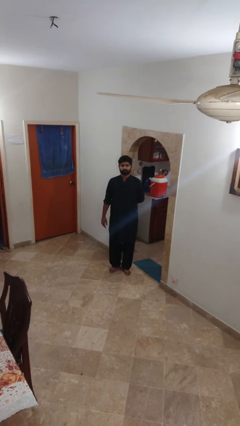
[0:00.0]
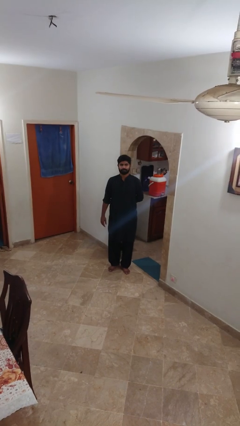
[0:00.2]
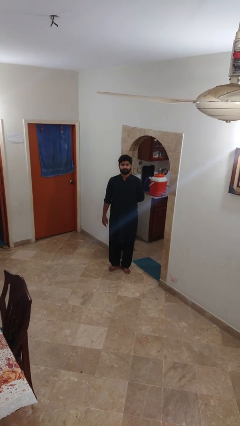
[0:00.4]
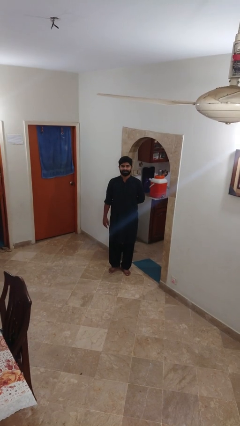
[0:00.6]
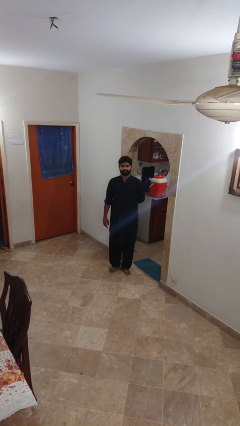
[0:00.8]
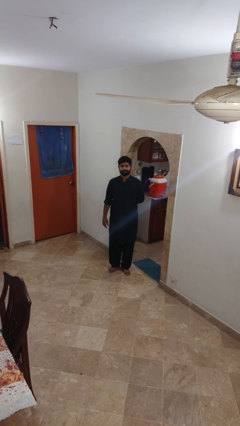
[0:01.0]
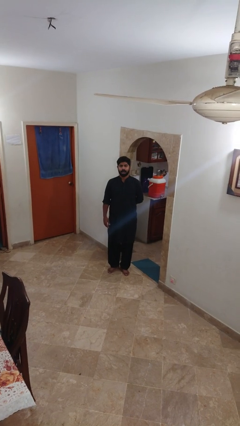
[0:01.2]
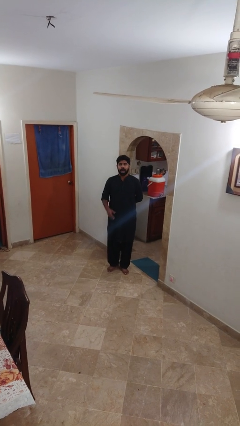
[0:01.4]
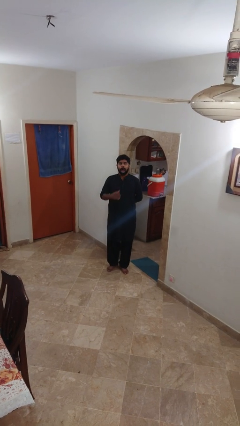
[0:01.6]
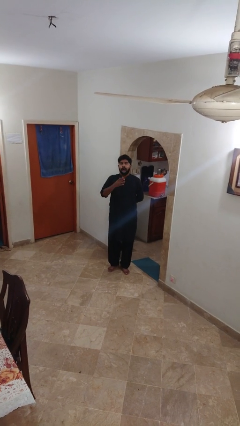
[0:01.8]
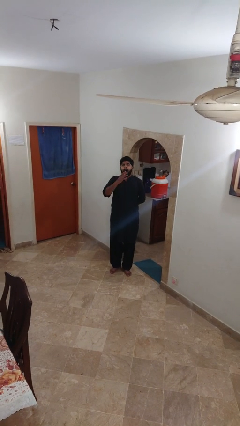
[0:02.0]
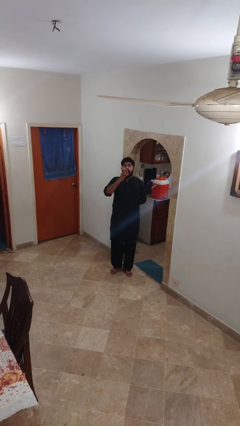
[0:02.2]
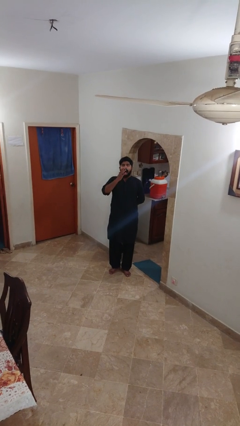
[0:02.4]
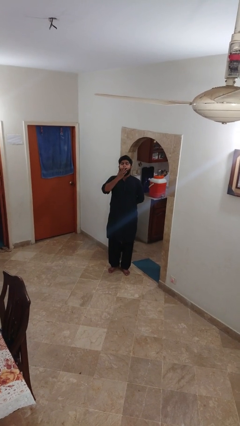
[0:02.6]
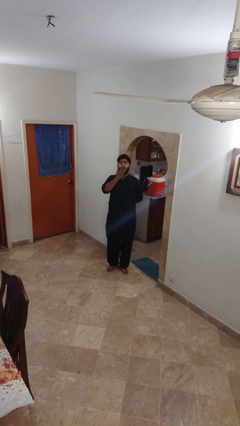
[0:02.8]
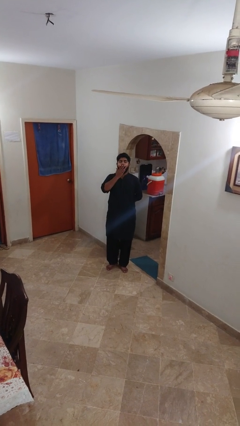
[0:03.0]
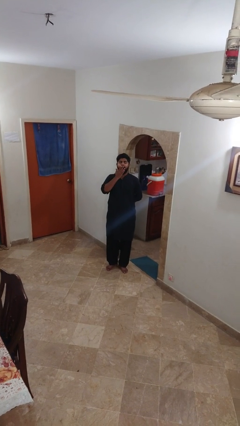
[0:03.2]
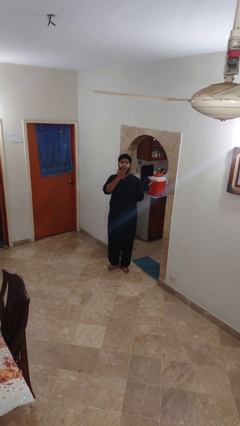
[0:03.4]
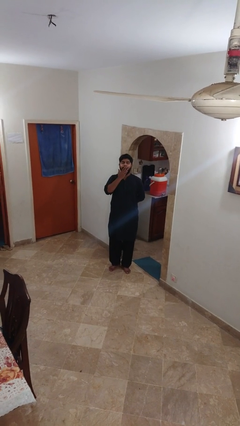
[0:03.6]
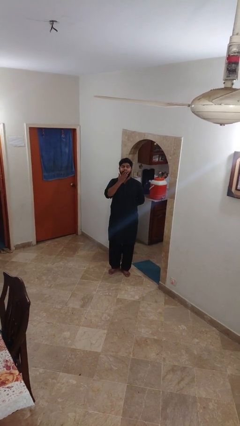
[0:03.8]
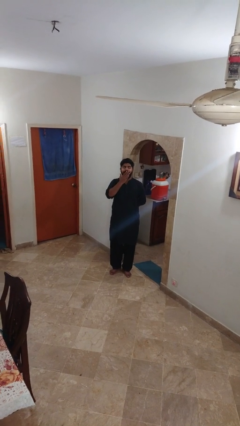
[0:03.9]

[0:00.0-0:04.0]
person yawns

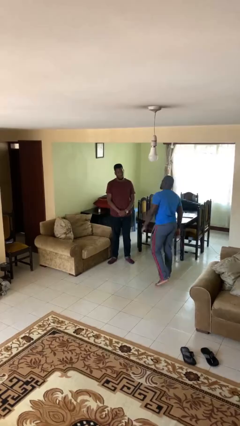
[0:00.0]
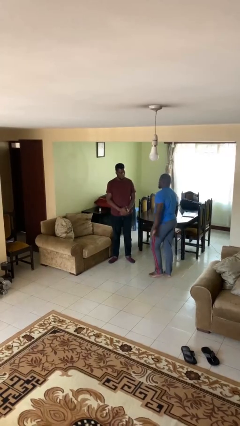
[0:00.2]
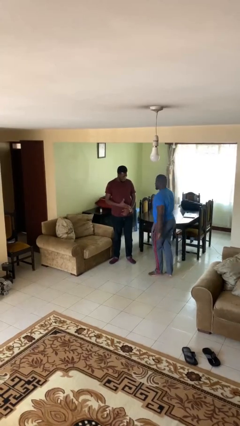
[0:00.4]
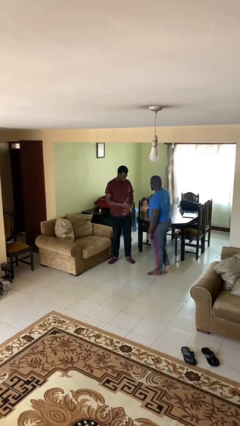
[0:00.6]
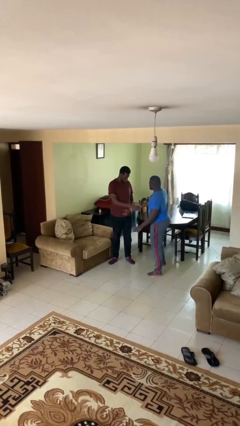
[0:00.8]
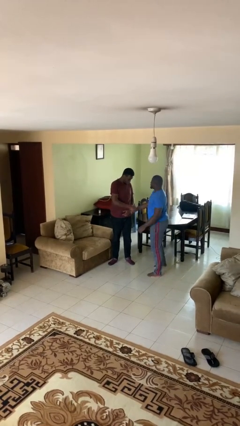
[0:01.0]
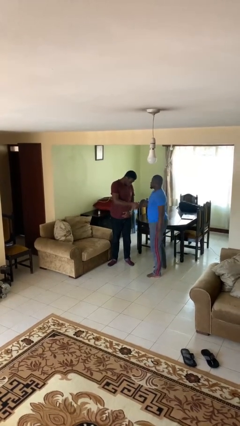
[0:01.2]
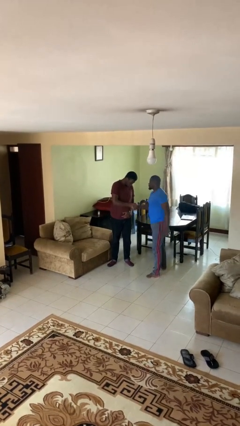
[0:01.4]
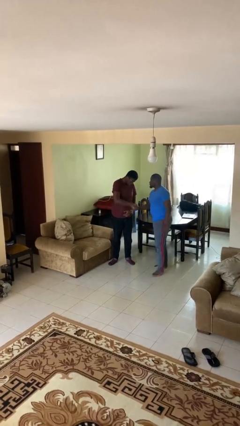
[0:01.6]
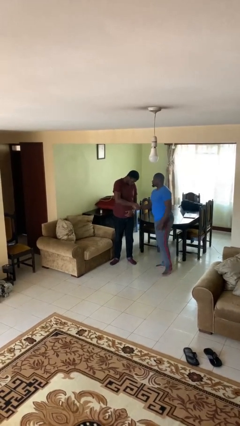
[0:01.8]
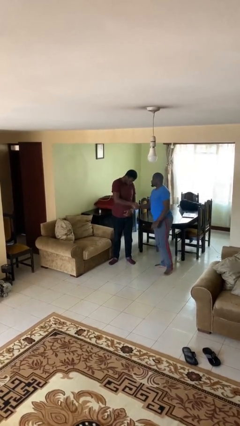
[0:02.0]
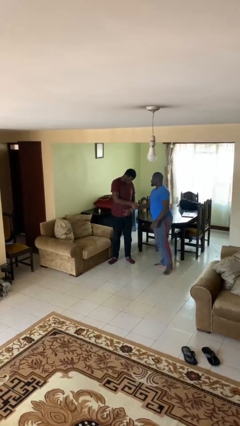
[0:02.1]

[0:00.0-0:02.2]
person shakes hand

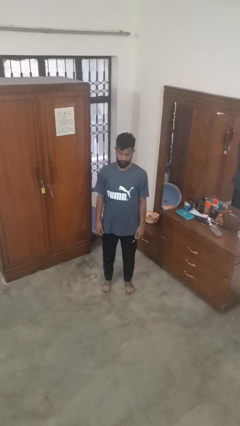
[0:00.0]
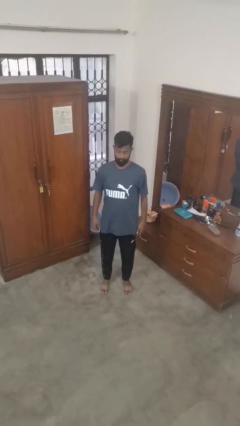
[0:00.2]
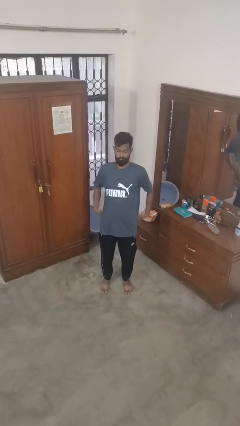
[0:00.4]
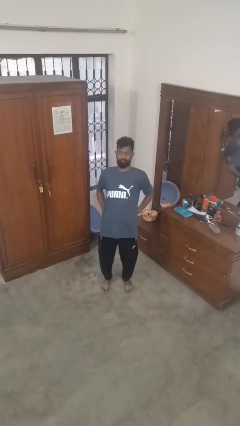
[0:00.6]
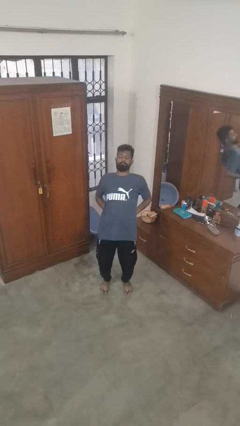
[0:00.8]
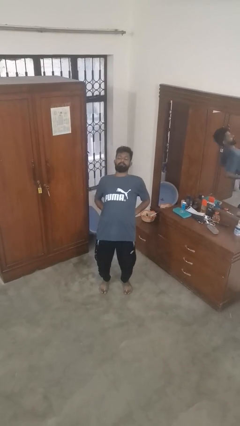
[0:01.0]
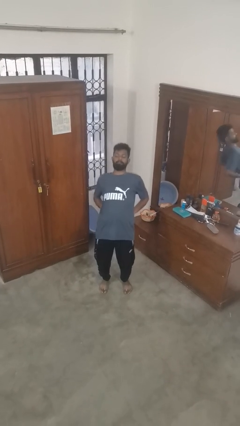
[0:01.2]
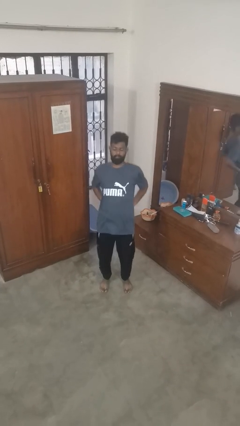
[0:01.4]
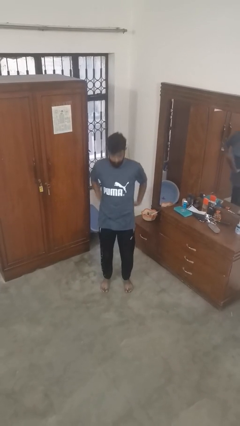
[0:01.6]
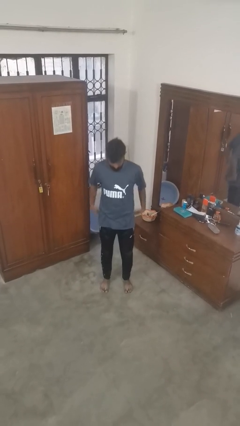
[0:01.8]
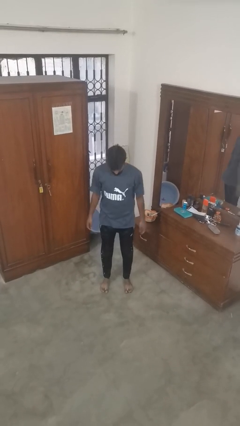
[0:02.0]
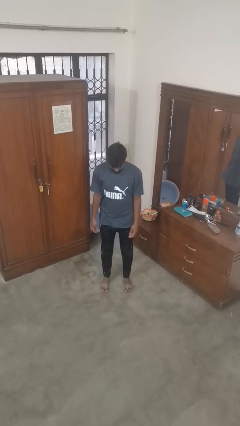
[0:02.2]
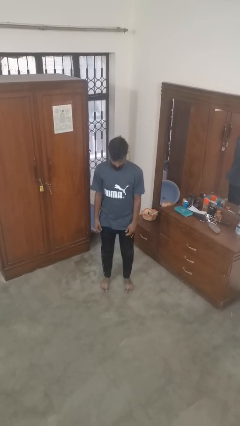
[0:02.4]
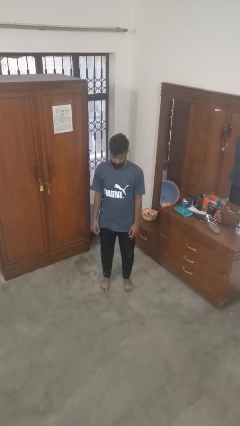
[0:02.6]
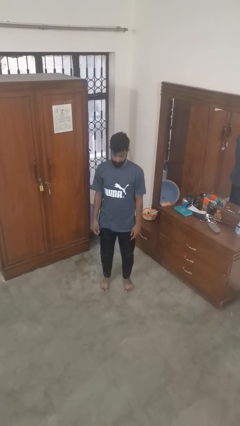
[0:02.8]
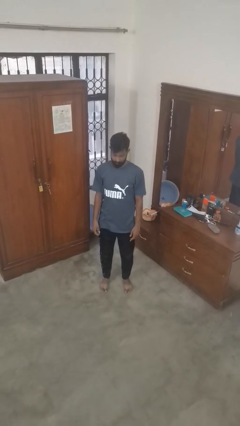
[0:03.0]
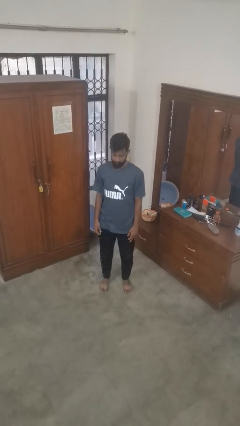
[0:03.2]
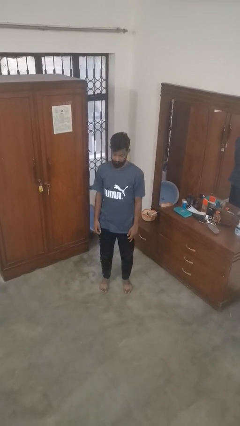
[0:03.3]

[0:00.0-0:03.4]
person stretches back

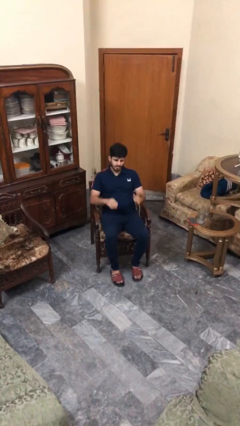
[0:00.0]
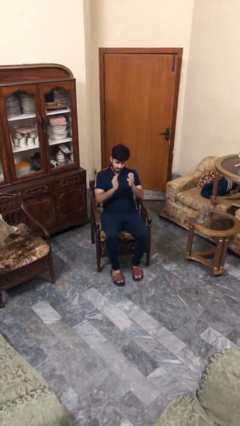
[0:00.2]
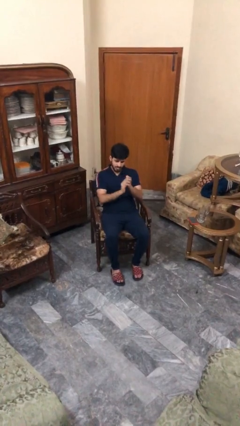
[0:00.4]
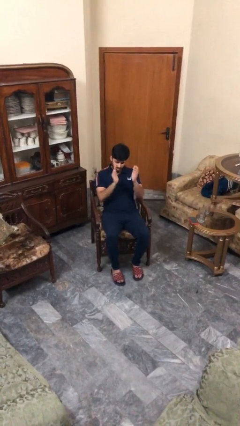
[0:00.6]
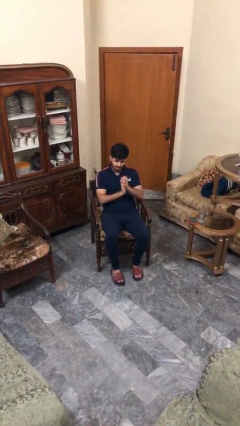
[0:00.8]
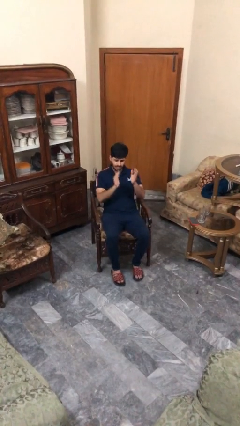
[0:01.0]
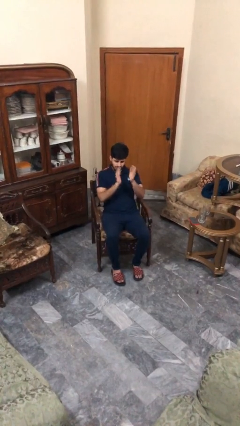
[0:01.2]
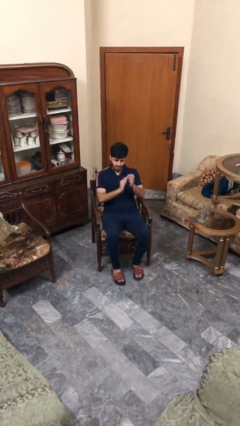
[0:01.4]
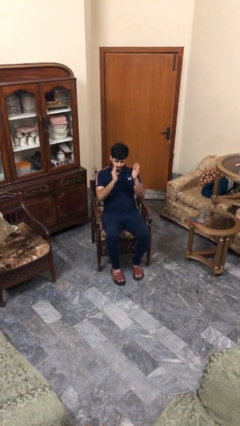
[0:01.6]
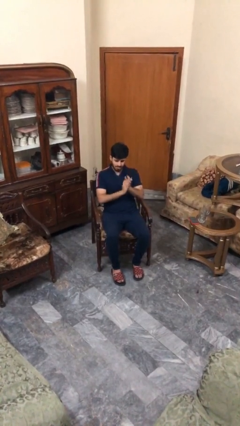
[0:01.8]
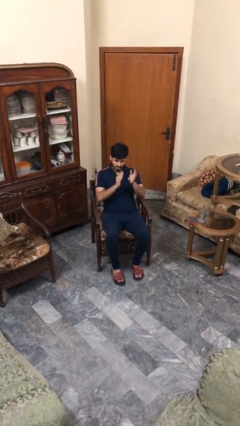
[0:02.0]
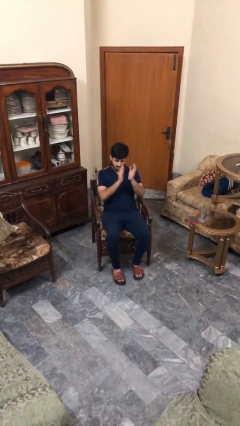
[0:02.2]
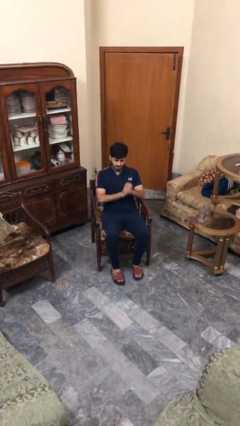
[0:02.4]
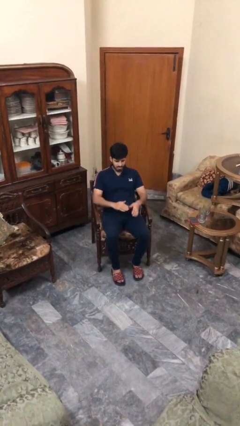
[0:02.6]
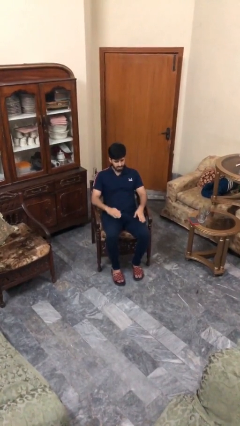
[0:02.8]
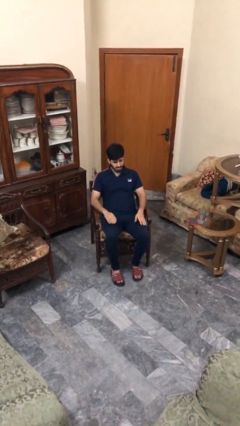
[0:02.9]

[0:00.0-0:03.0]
person claps hands

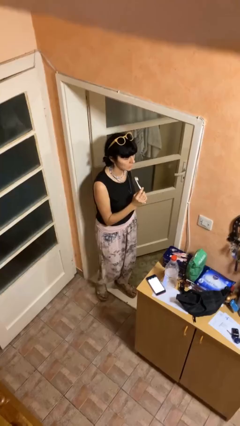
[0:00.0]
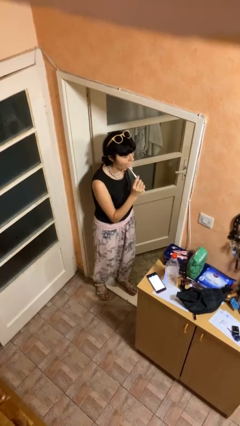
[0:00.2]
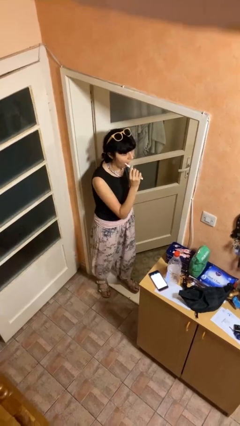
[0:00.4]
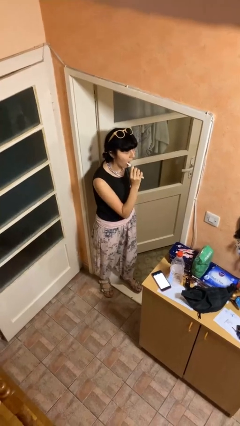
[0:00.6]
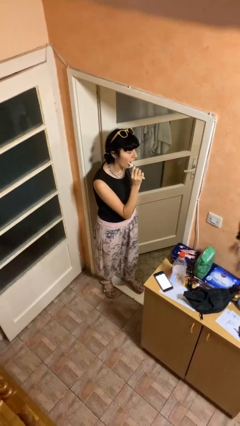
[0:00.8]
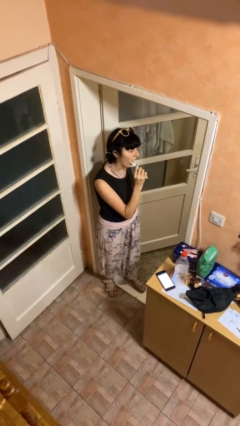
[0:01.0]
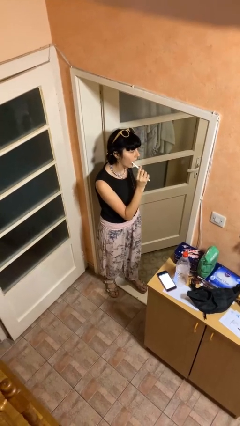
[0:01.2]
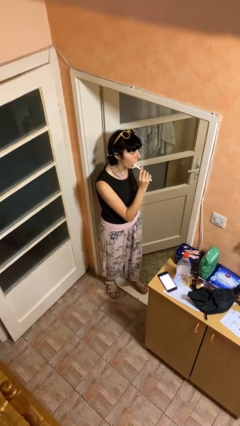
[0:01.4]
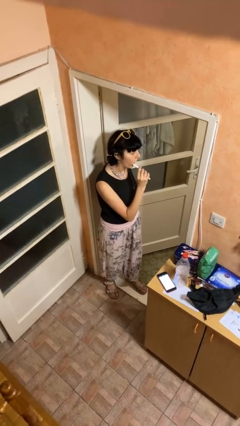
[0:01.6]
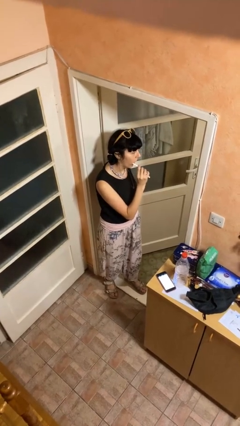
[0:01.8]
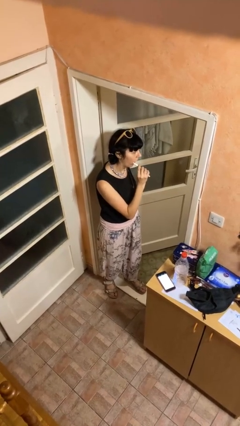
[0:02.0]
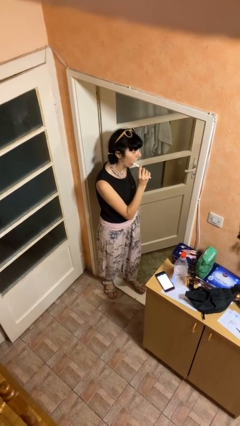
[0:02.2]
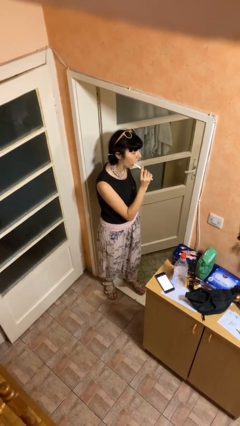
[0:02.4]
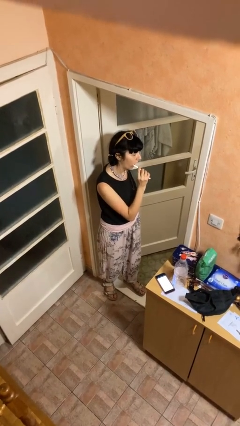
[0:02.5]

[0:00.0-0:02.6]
person brushes teeth

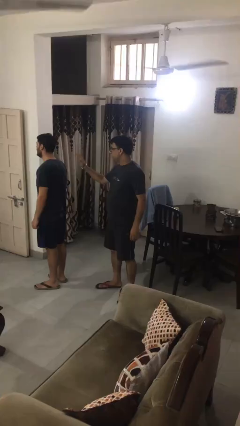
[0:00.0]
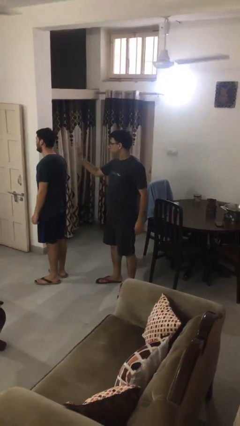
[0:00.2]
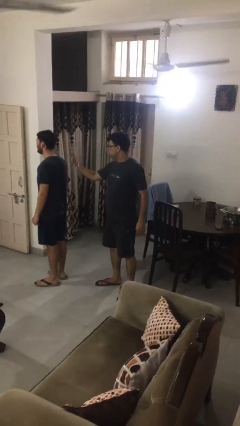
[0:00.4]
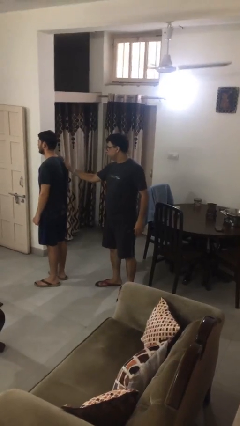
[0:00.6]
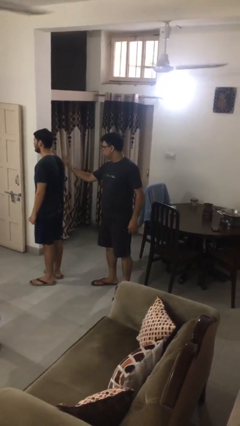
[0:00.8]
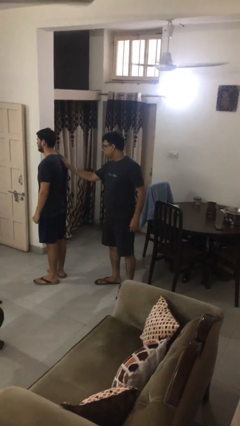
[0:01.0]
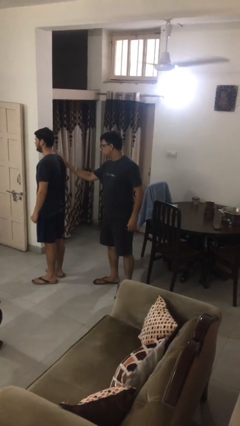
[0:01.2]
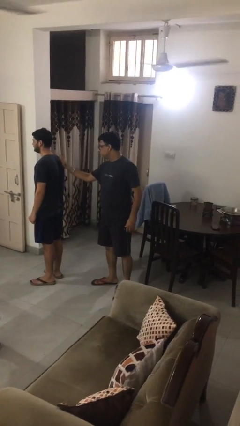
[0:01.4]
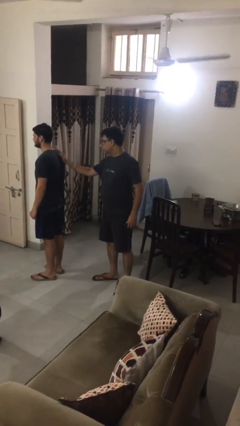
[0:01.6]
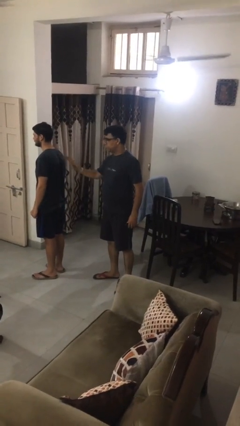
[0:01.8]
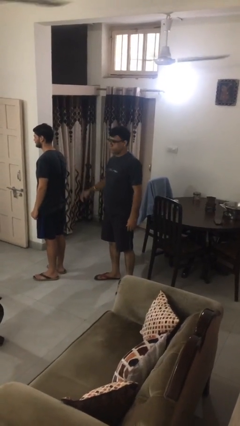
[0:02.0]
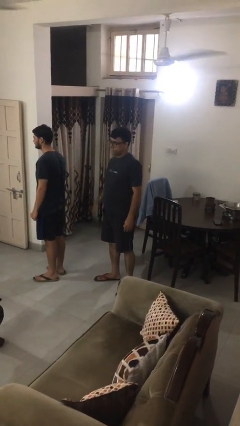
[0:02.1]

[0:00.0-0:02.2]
person touches back of person
